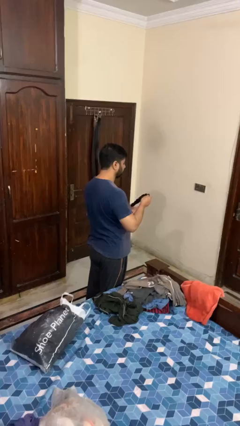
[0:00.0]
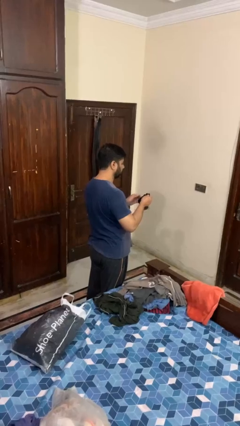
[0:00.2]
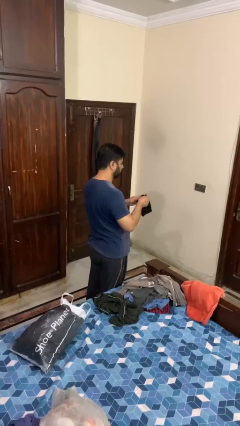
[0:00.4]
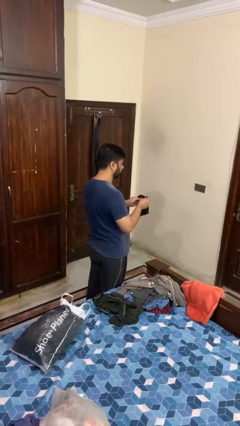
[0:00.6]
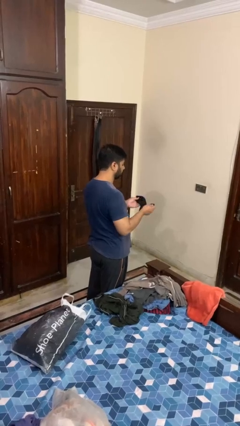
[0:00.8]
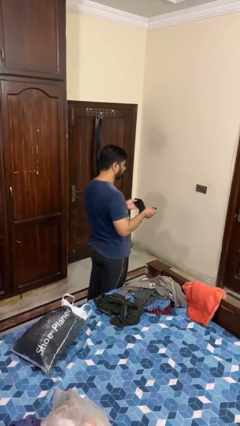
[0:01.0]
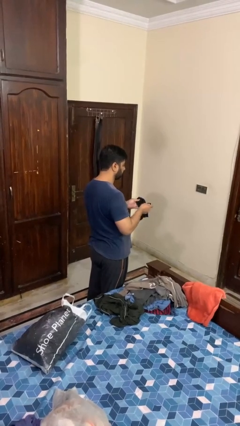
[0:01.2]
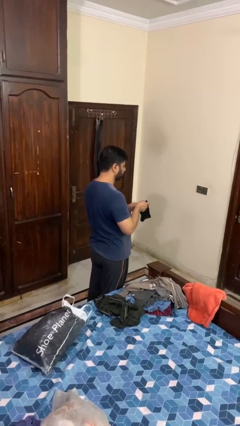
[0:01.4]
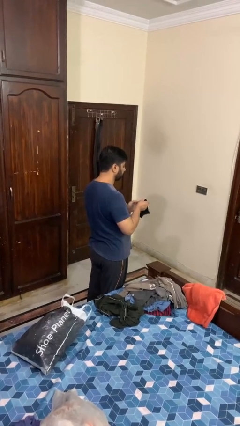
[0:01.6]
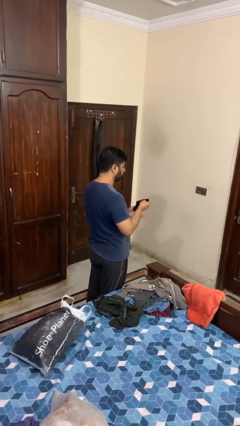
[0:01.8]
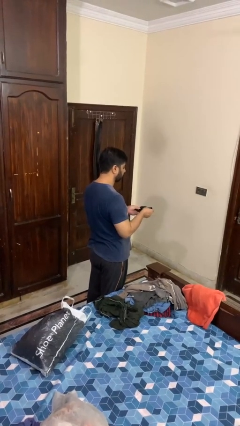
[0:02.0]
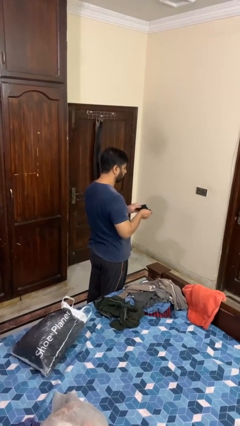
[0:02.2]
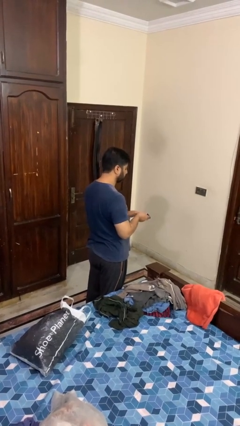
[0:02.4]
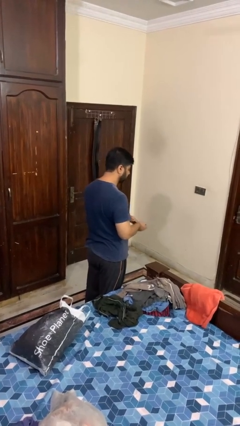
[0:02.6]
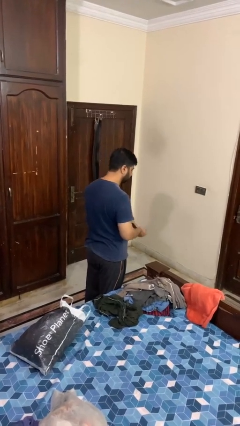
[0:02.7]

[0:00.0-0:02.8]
person folds socks

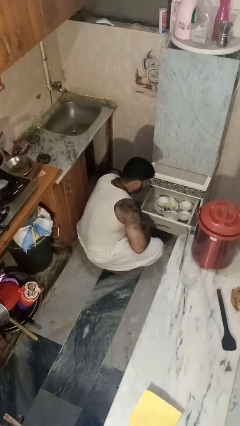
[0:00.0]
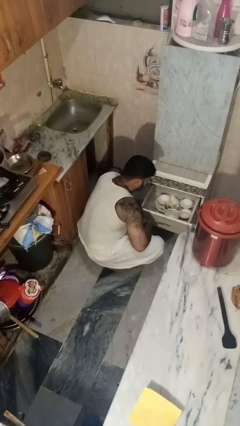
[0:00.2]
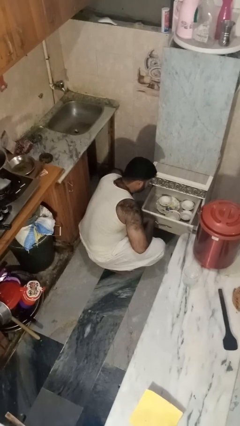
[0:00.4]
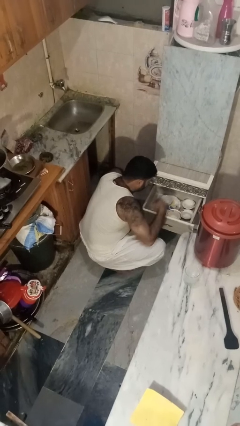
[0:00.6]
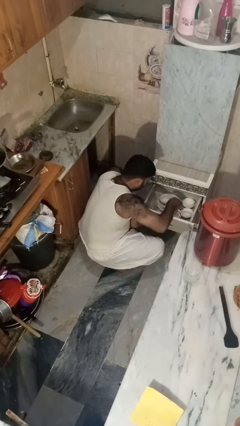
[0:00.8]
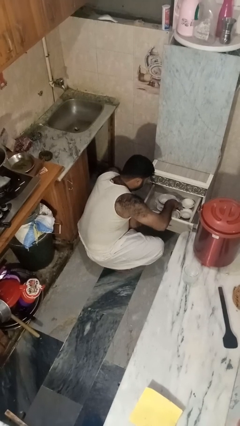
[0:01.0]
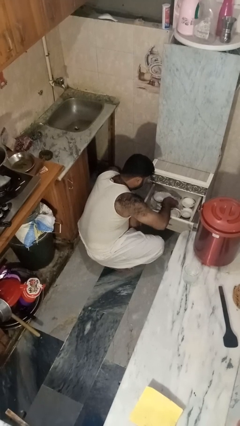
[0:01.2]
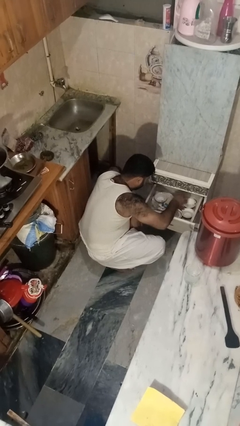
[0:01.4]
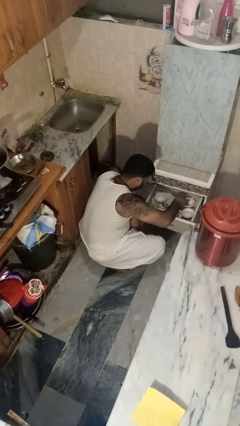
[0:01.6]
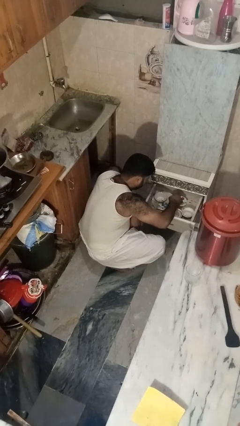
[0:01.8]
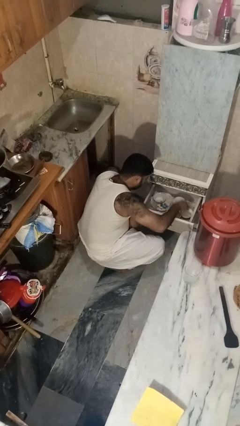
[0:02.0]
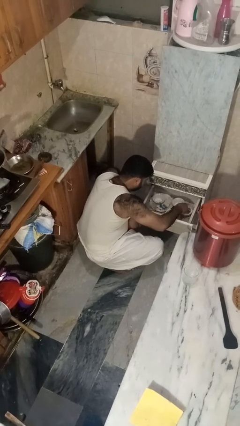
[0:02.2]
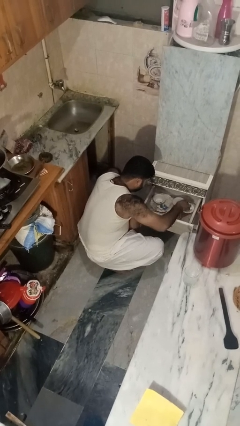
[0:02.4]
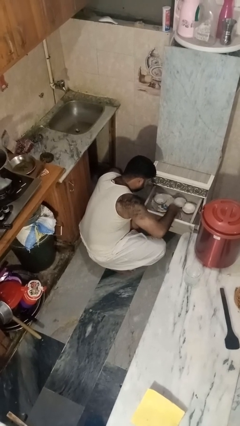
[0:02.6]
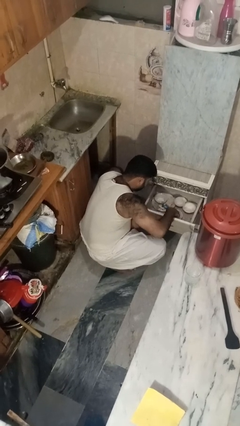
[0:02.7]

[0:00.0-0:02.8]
person searches in kitchen drawer

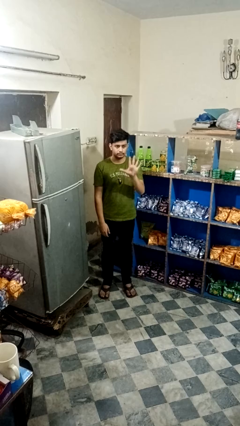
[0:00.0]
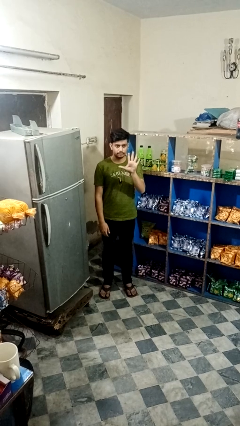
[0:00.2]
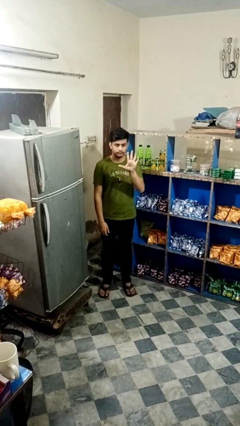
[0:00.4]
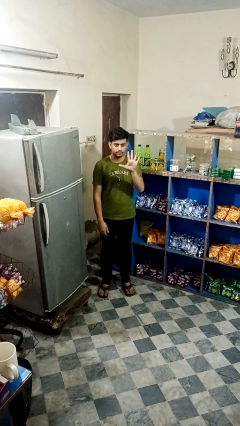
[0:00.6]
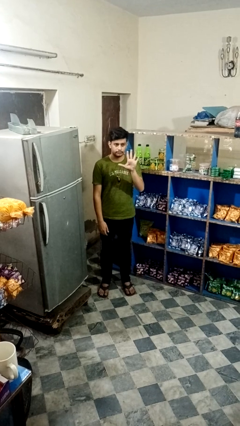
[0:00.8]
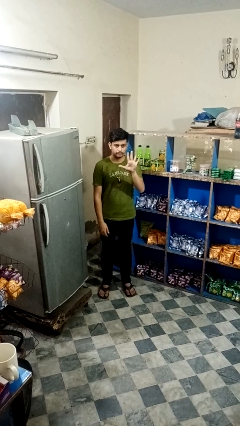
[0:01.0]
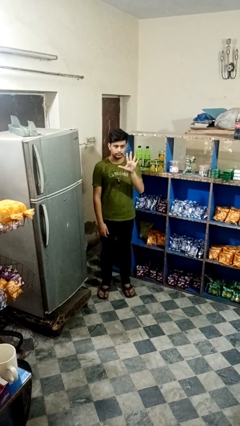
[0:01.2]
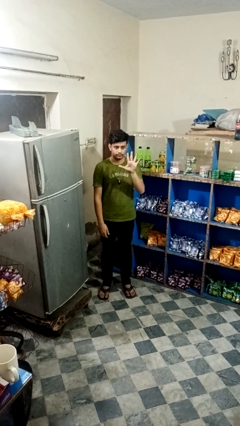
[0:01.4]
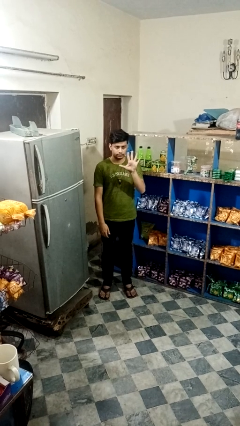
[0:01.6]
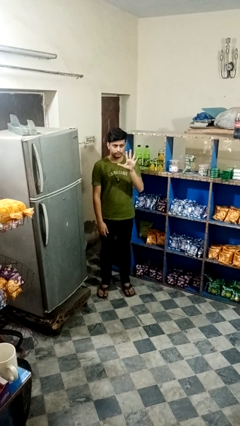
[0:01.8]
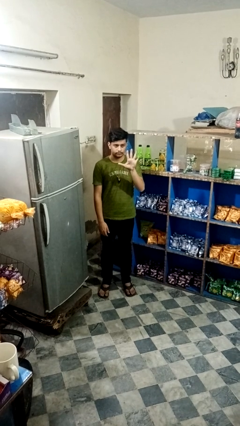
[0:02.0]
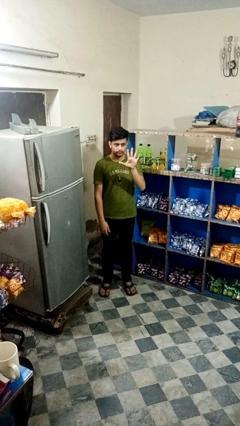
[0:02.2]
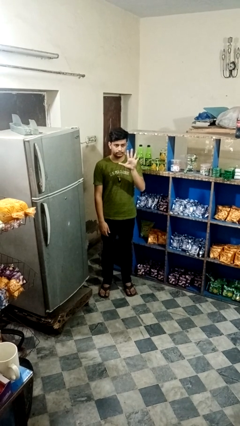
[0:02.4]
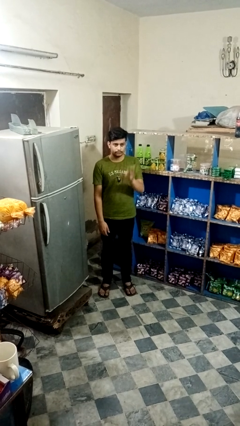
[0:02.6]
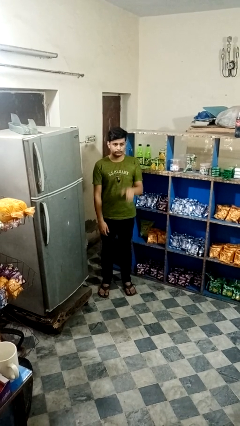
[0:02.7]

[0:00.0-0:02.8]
person gestures number five

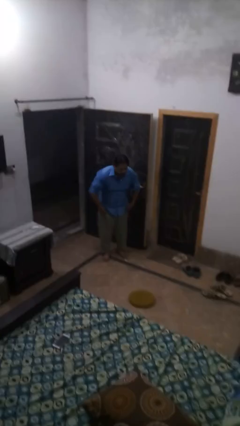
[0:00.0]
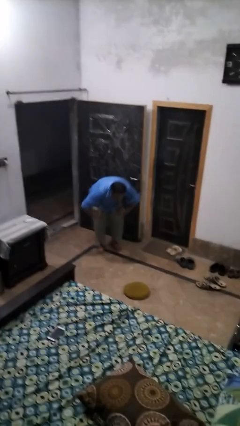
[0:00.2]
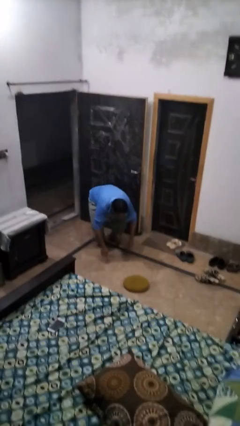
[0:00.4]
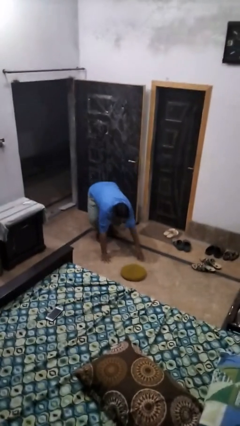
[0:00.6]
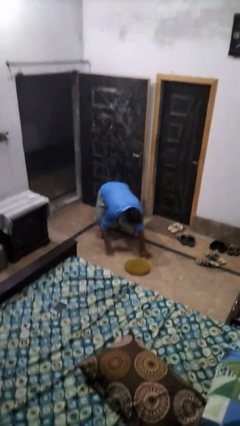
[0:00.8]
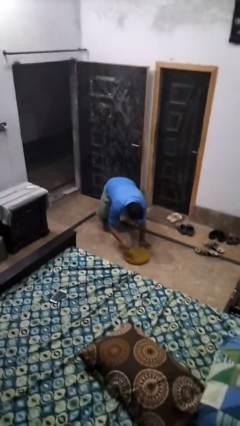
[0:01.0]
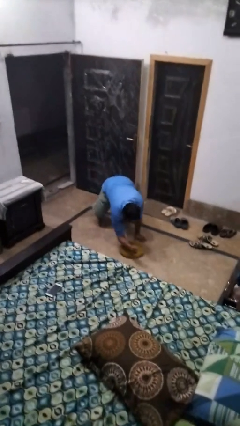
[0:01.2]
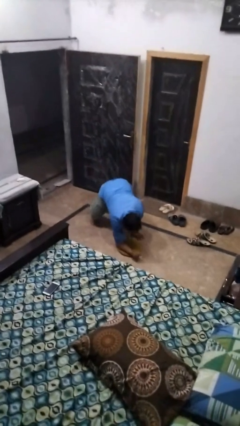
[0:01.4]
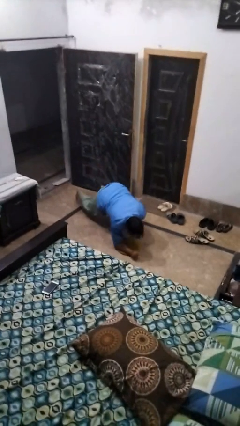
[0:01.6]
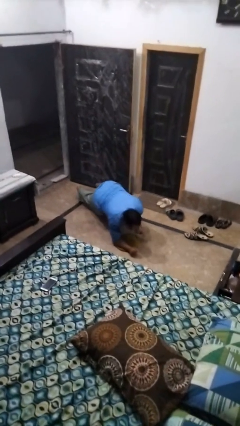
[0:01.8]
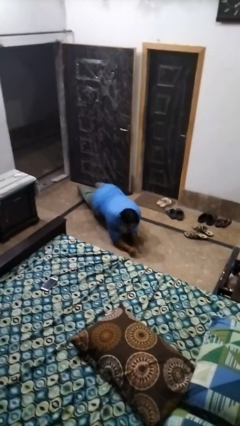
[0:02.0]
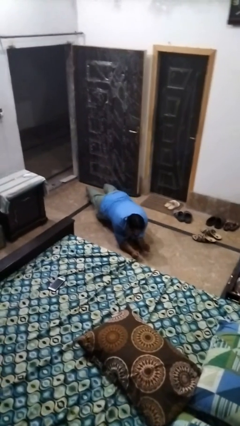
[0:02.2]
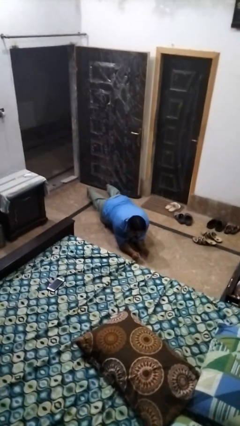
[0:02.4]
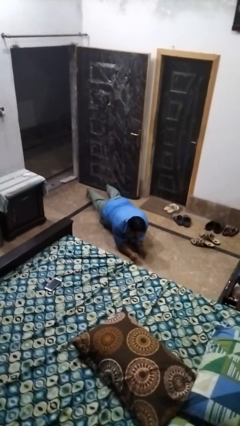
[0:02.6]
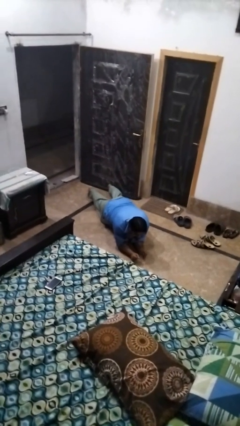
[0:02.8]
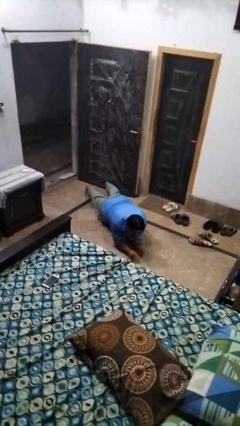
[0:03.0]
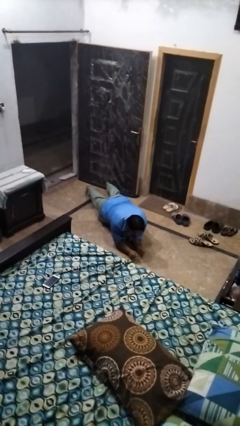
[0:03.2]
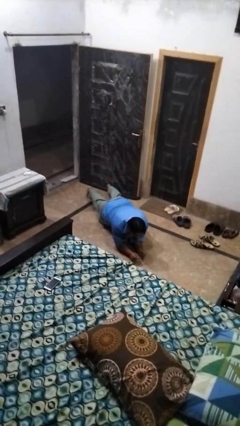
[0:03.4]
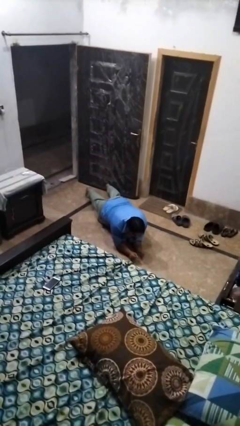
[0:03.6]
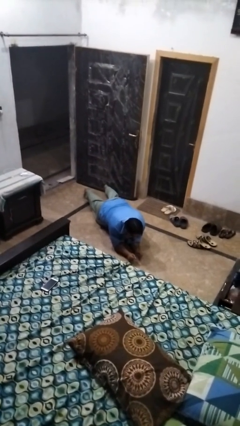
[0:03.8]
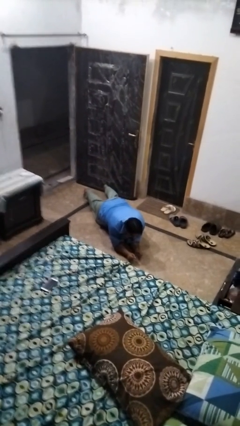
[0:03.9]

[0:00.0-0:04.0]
person exercises with plank

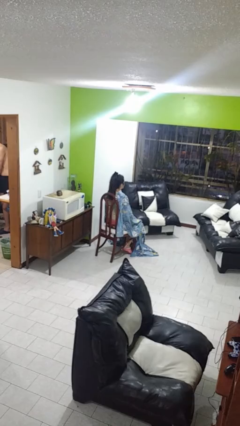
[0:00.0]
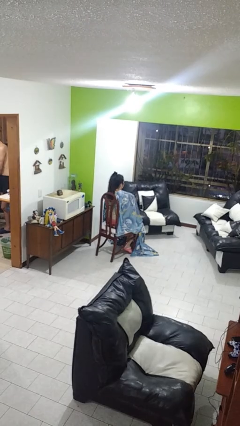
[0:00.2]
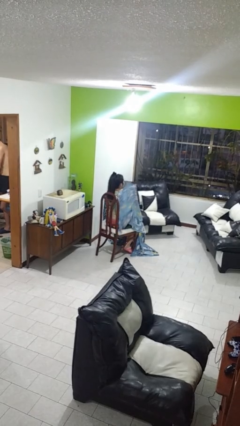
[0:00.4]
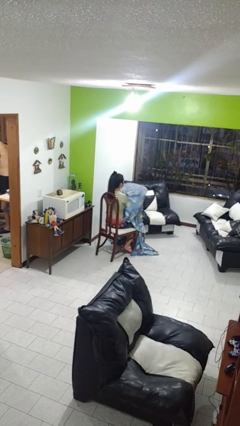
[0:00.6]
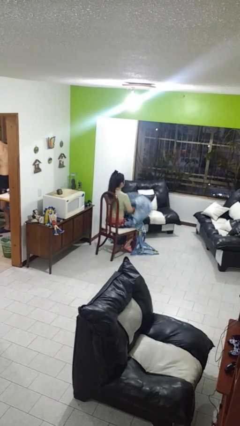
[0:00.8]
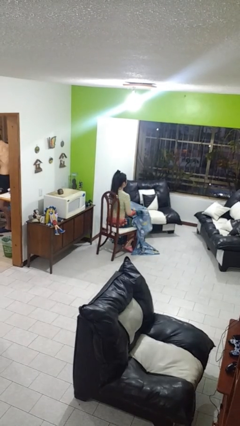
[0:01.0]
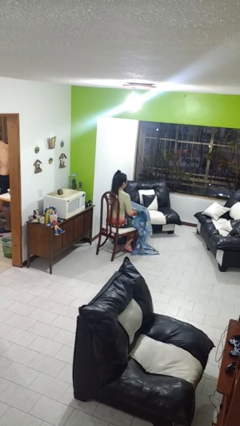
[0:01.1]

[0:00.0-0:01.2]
person uncovers with blanket

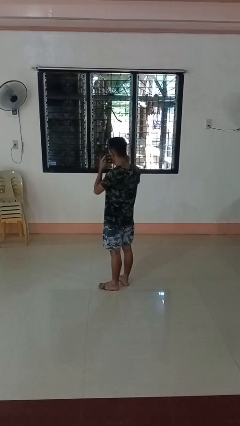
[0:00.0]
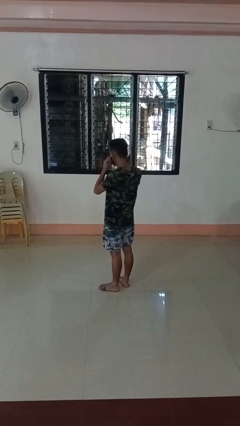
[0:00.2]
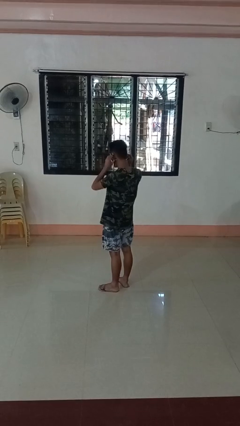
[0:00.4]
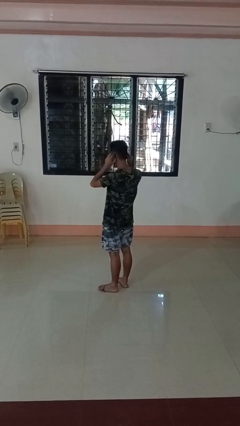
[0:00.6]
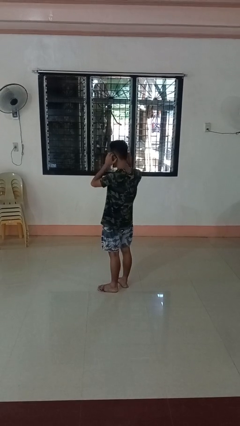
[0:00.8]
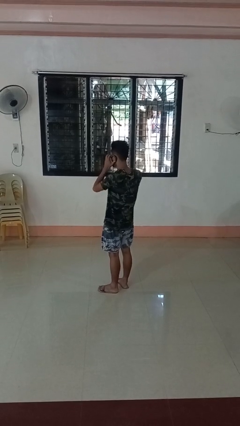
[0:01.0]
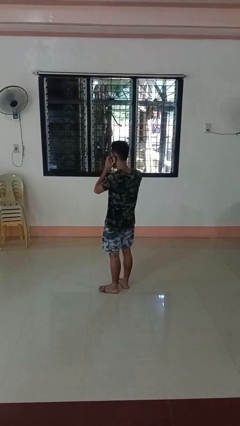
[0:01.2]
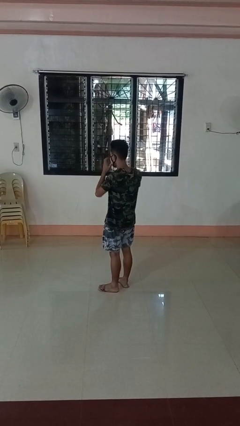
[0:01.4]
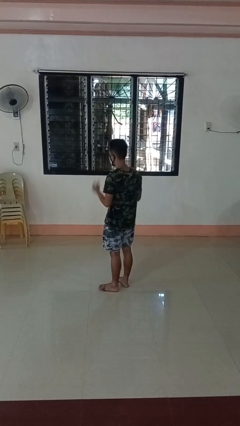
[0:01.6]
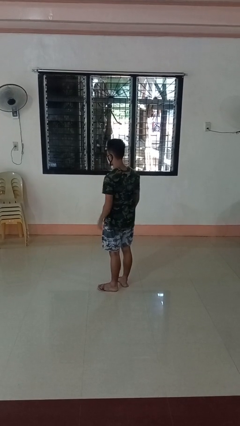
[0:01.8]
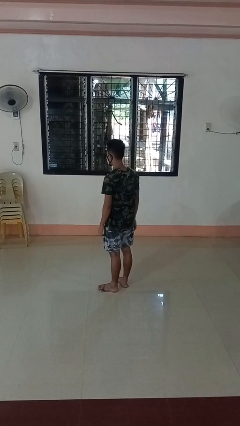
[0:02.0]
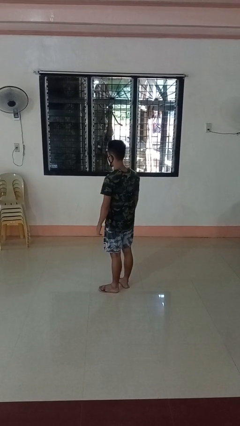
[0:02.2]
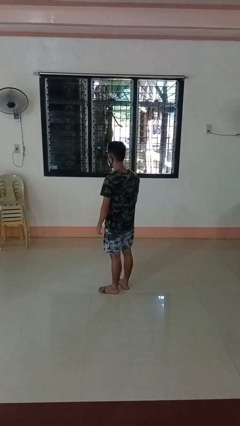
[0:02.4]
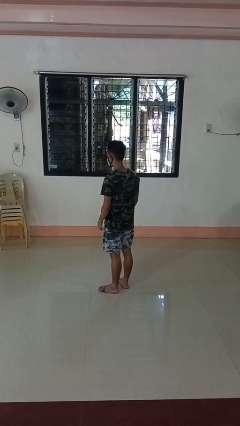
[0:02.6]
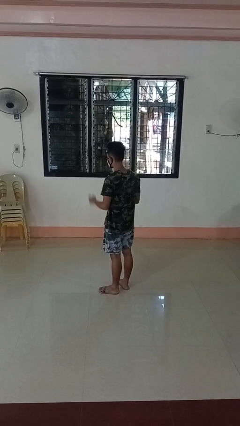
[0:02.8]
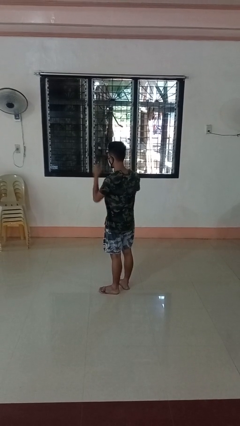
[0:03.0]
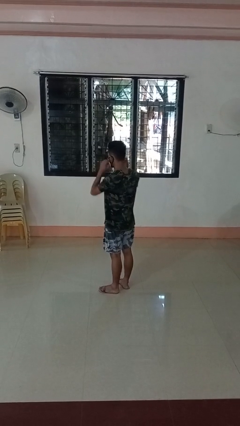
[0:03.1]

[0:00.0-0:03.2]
person puts on facemask

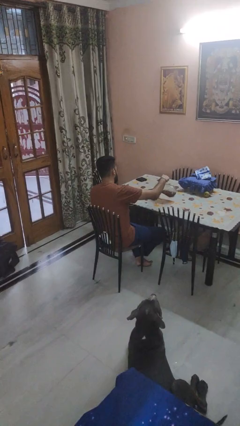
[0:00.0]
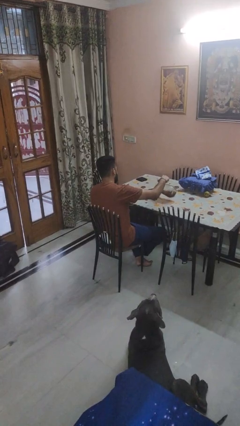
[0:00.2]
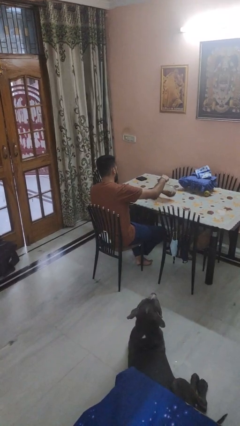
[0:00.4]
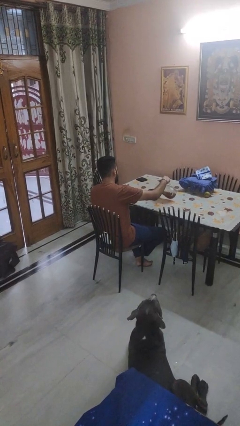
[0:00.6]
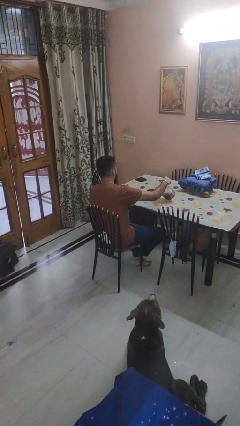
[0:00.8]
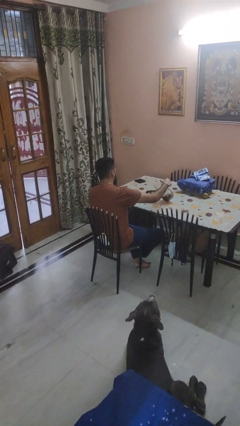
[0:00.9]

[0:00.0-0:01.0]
person pours into bowl
